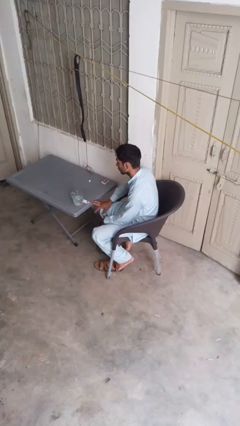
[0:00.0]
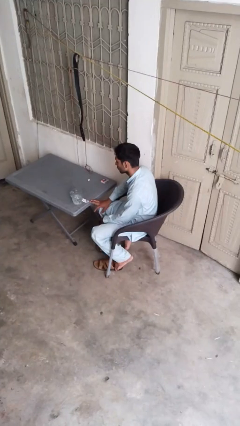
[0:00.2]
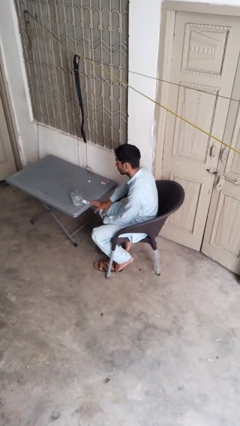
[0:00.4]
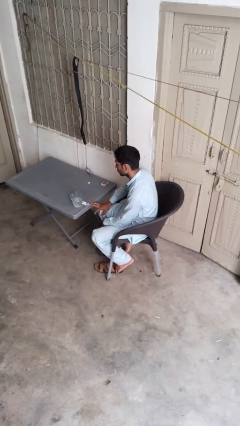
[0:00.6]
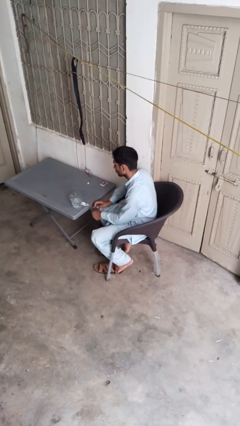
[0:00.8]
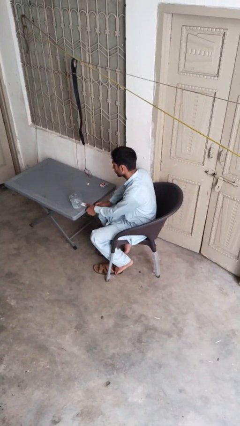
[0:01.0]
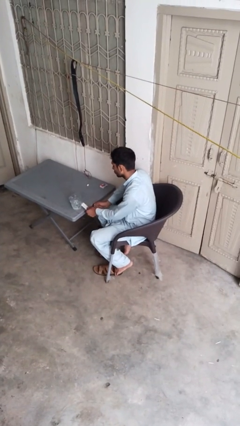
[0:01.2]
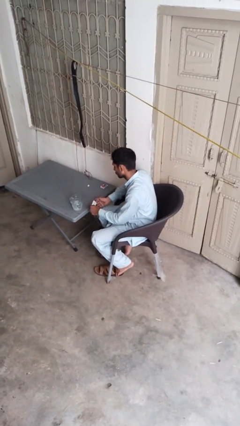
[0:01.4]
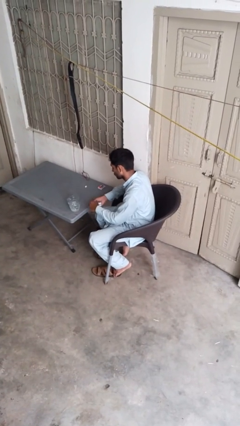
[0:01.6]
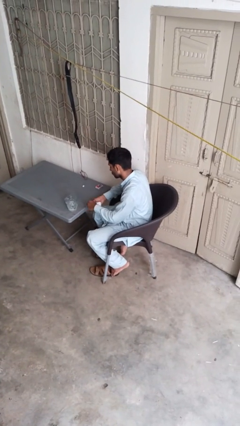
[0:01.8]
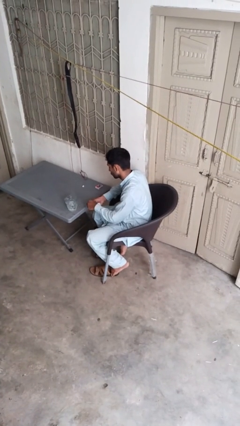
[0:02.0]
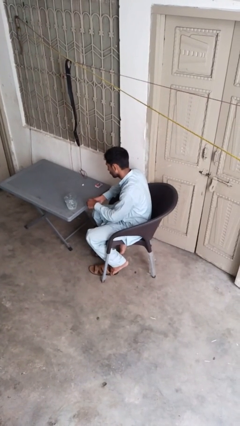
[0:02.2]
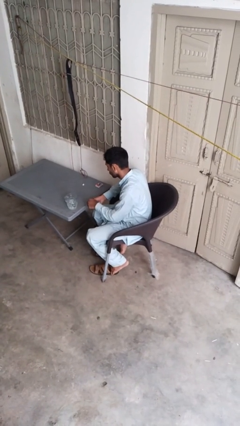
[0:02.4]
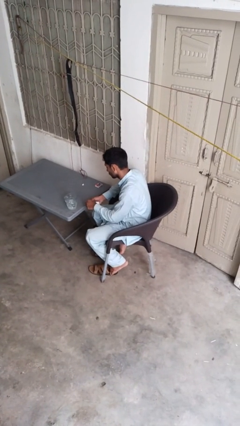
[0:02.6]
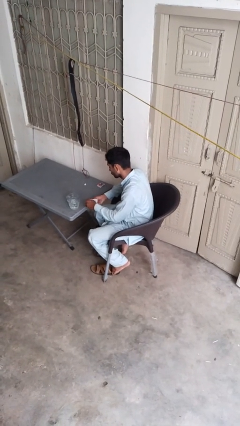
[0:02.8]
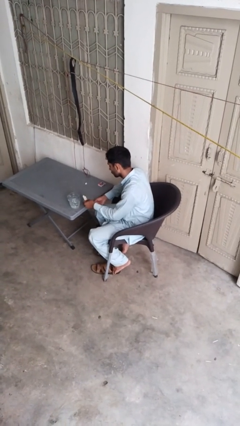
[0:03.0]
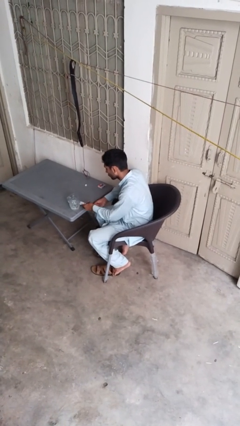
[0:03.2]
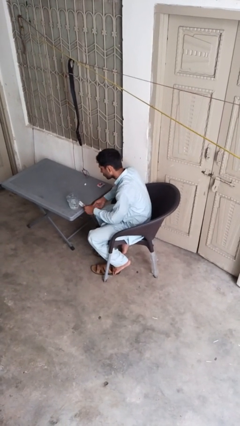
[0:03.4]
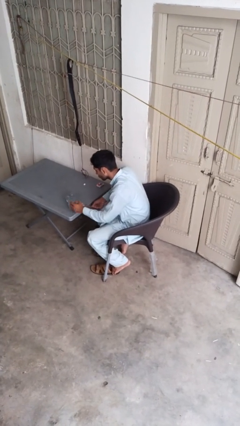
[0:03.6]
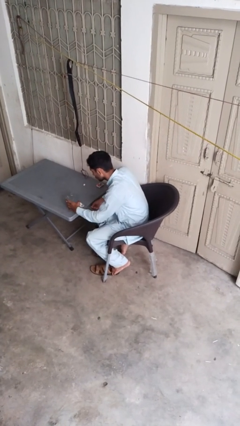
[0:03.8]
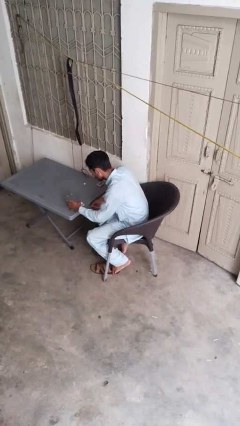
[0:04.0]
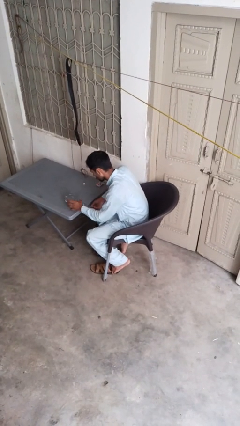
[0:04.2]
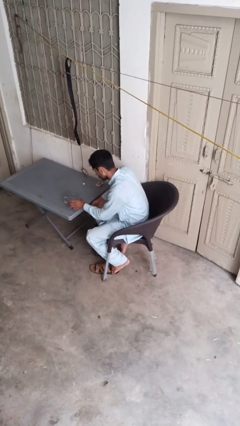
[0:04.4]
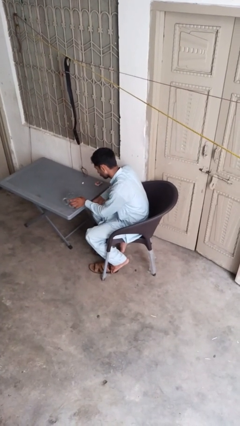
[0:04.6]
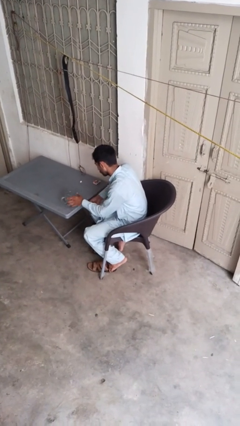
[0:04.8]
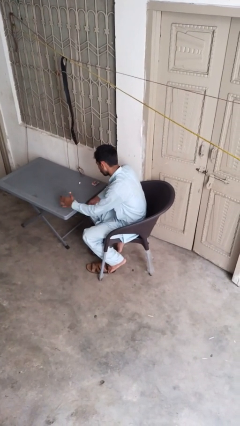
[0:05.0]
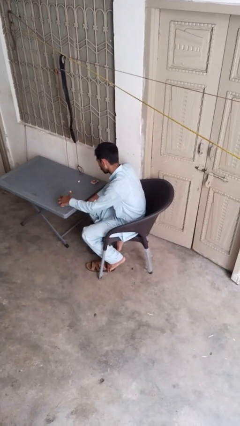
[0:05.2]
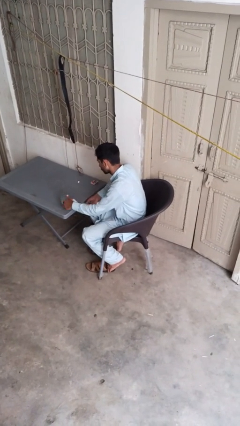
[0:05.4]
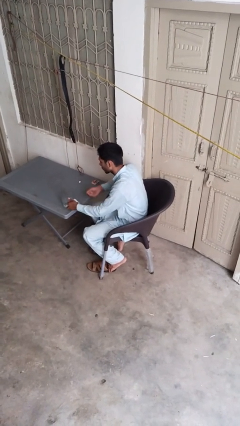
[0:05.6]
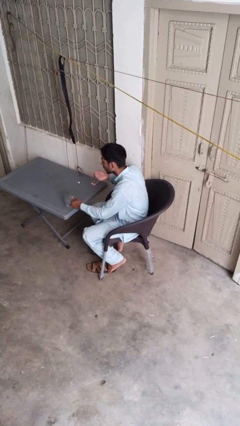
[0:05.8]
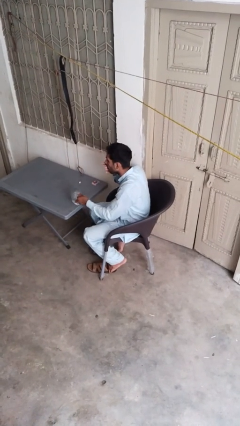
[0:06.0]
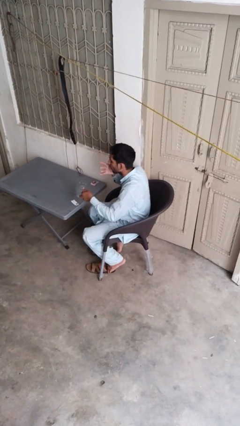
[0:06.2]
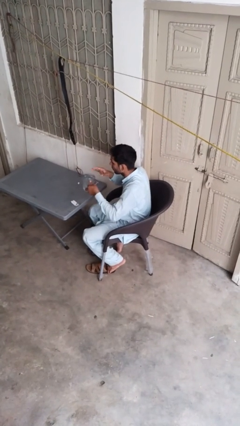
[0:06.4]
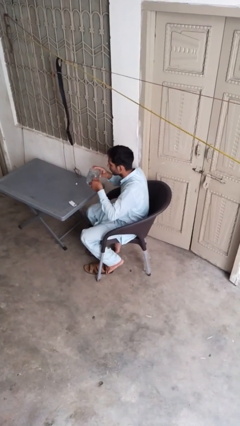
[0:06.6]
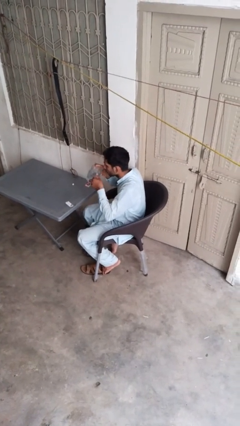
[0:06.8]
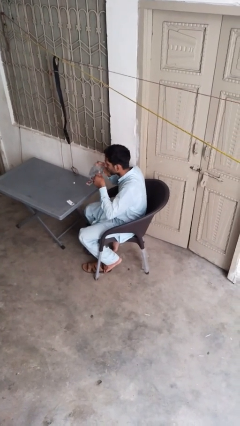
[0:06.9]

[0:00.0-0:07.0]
person takes medicine pills

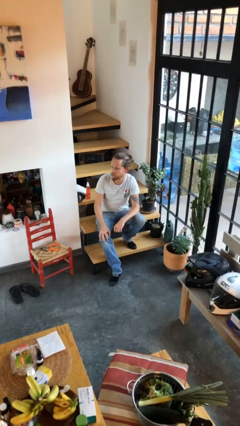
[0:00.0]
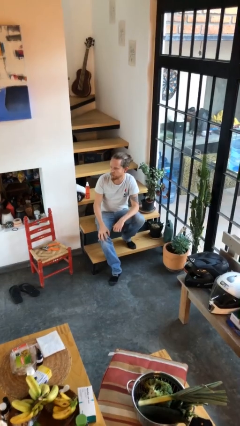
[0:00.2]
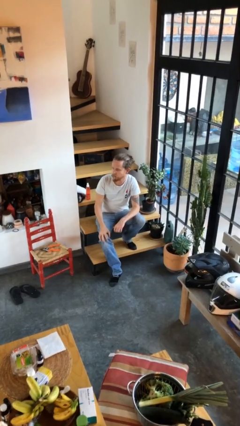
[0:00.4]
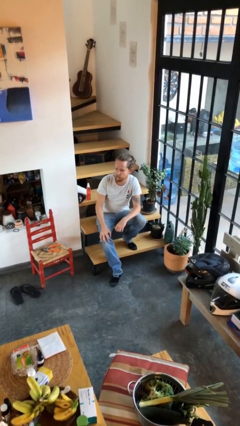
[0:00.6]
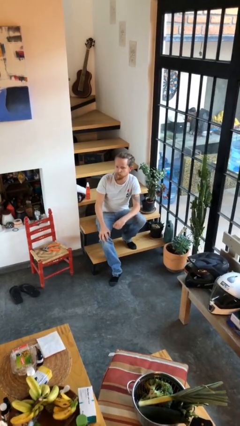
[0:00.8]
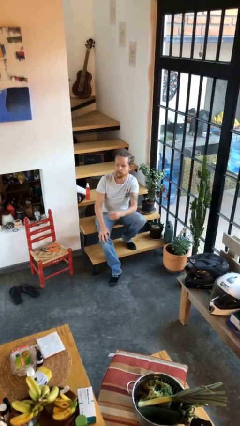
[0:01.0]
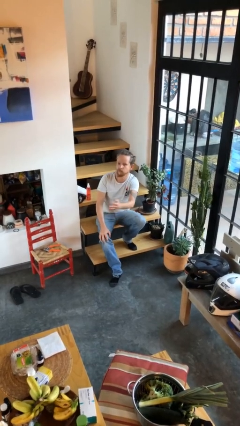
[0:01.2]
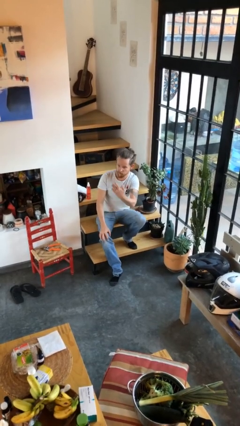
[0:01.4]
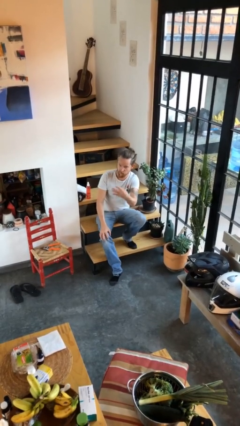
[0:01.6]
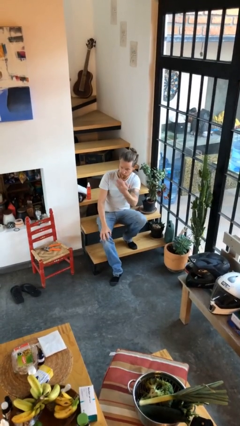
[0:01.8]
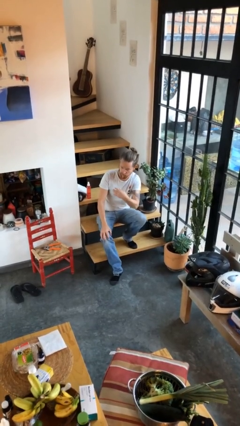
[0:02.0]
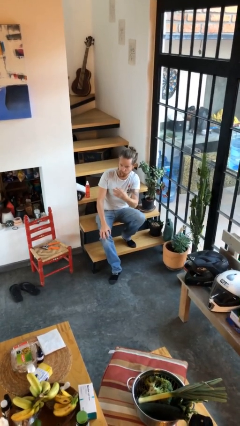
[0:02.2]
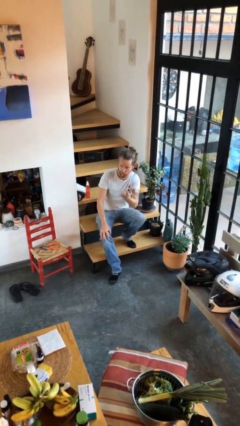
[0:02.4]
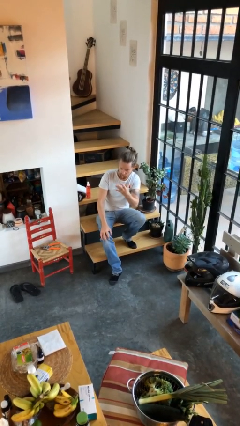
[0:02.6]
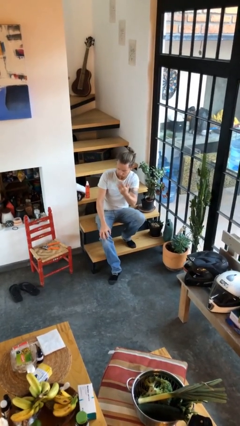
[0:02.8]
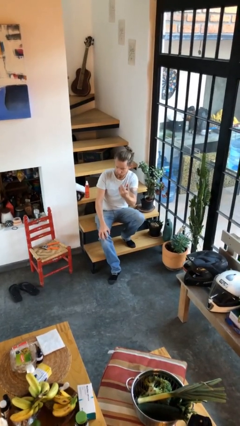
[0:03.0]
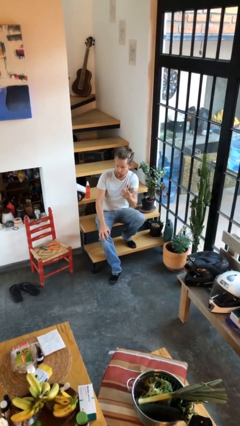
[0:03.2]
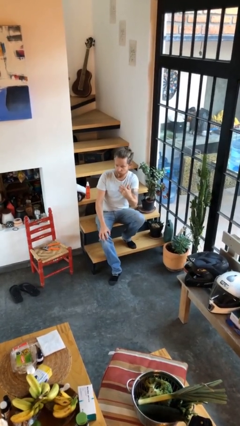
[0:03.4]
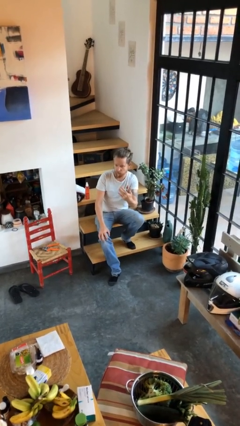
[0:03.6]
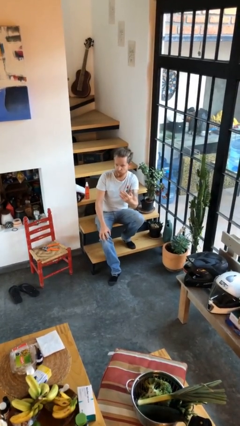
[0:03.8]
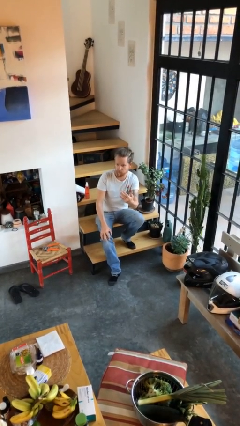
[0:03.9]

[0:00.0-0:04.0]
person gestures come here

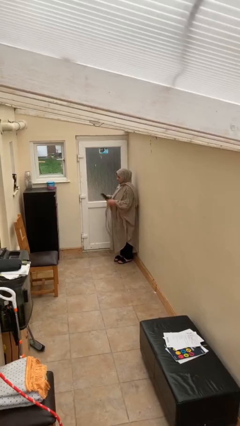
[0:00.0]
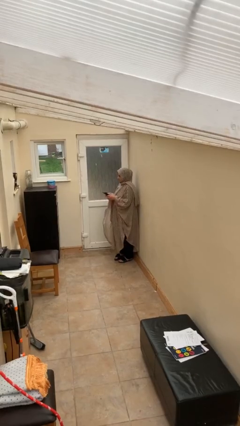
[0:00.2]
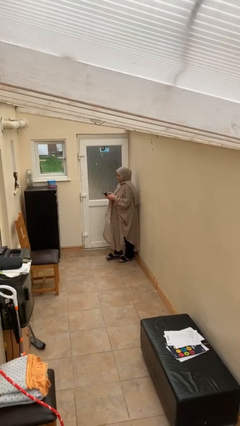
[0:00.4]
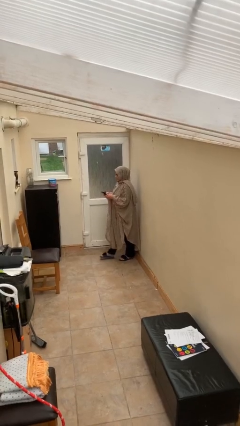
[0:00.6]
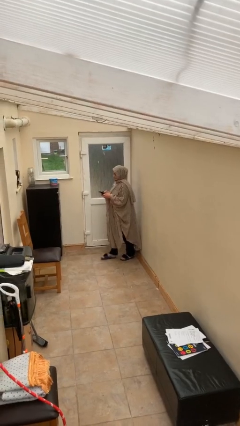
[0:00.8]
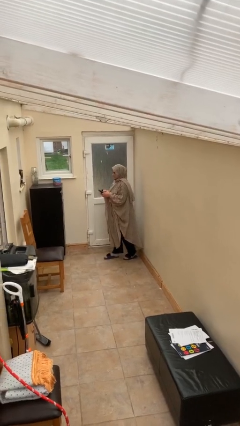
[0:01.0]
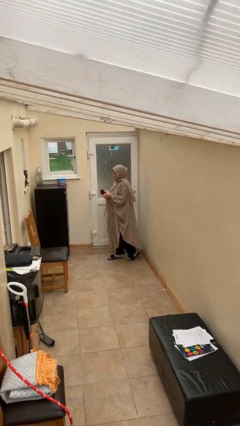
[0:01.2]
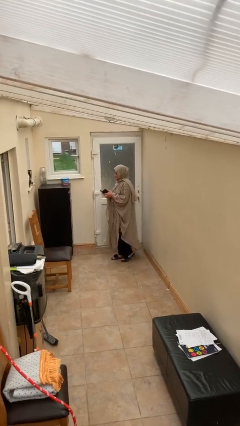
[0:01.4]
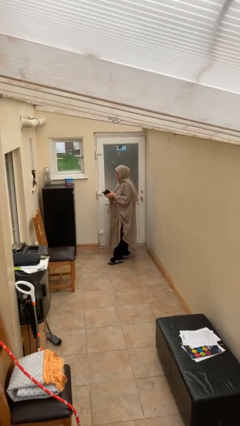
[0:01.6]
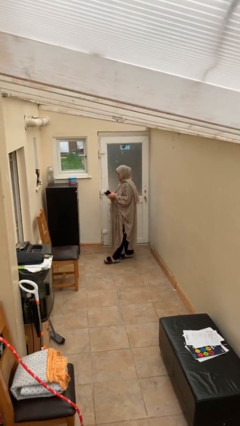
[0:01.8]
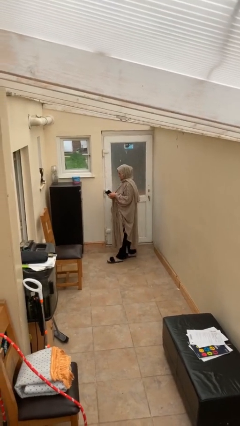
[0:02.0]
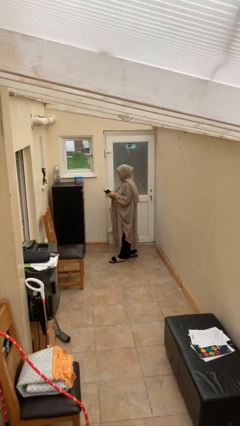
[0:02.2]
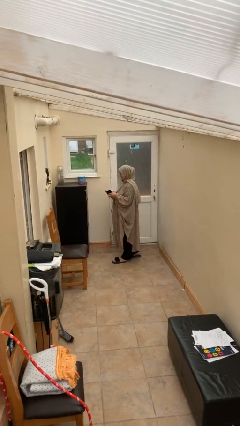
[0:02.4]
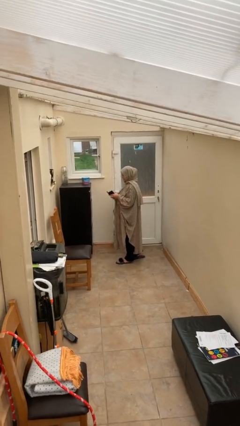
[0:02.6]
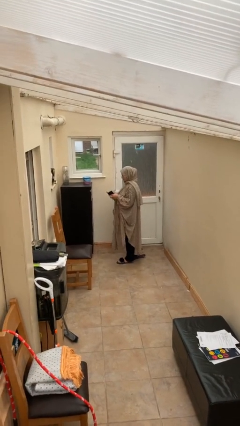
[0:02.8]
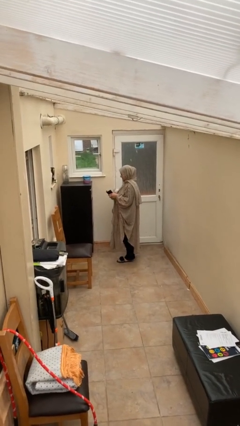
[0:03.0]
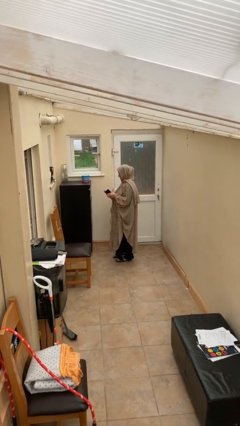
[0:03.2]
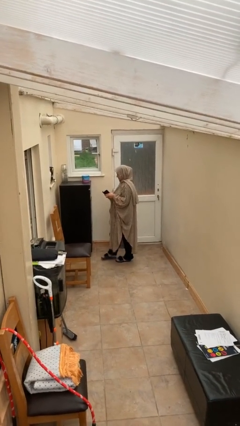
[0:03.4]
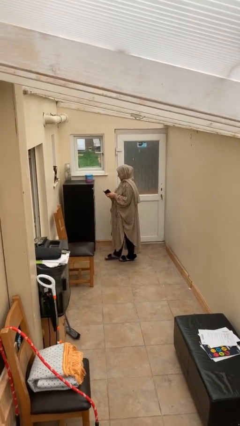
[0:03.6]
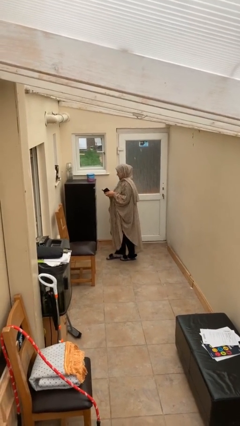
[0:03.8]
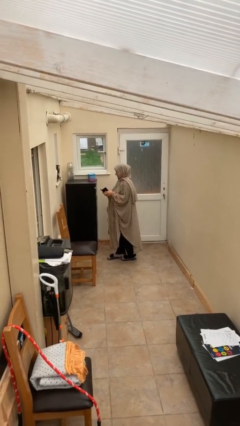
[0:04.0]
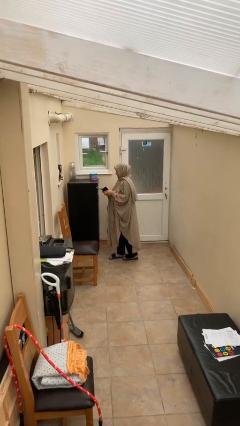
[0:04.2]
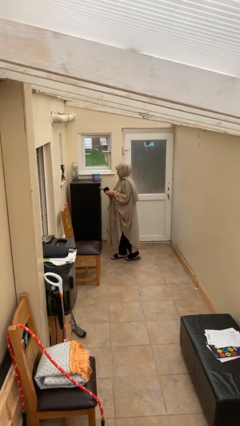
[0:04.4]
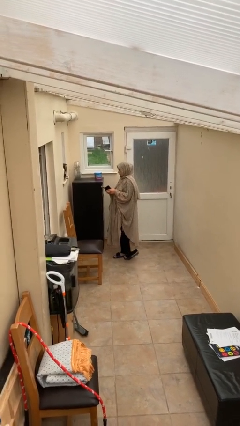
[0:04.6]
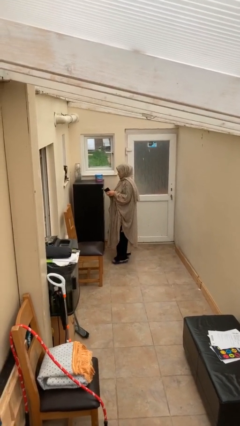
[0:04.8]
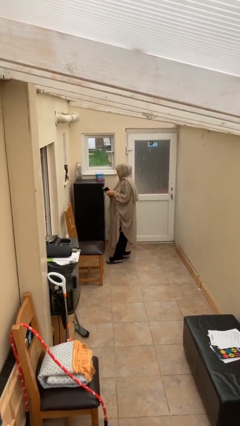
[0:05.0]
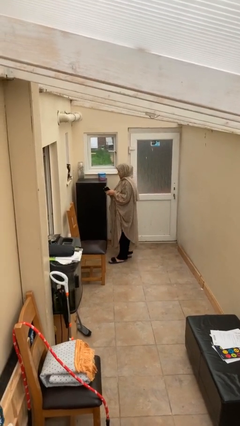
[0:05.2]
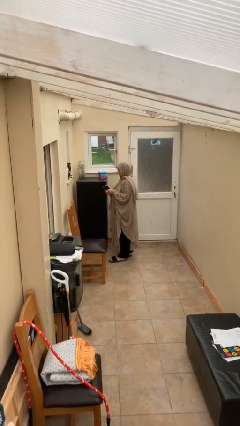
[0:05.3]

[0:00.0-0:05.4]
person texts on phone

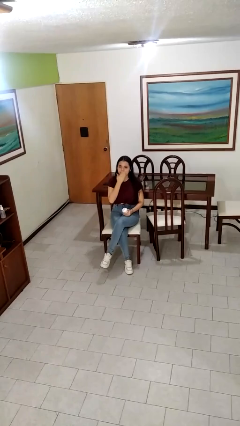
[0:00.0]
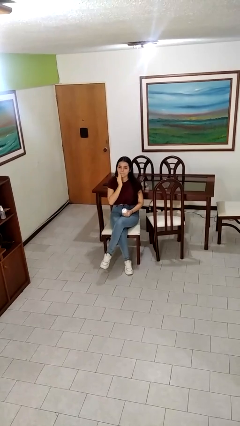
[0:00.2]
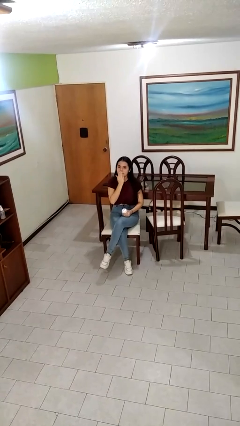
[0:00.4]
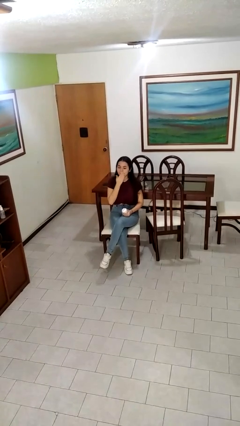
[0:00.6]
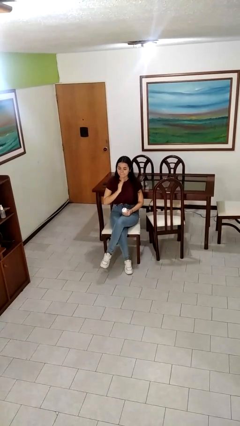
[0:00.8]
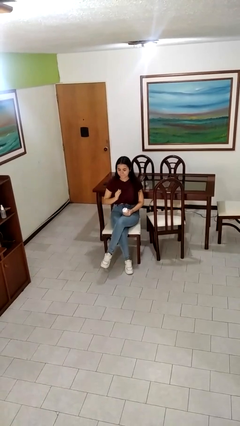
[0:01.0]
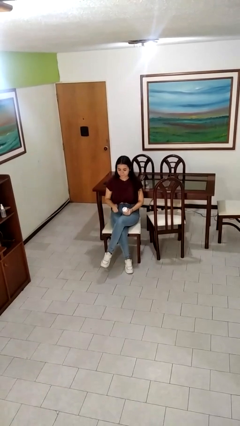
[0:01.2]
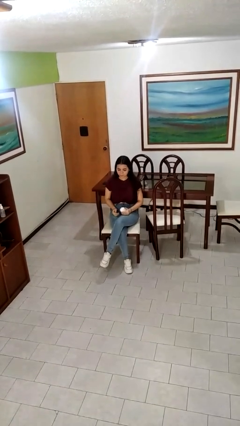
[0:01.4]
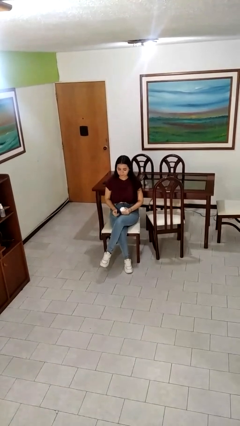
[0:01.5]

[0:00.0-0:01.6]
person applies facial moisturizer
